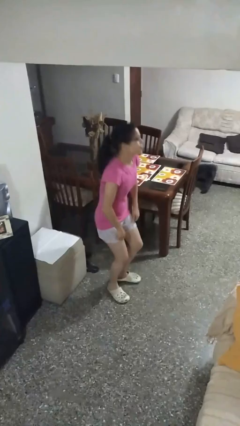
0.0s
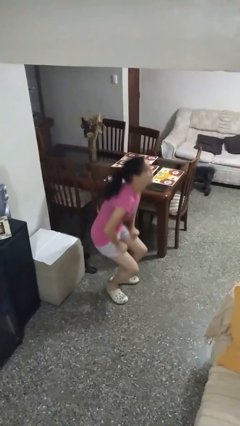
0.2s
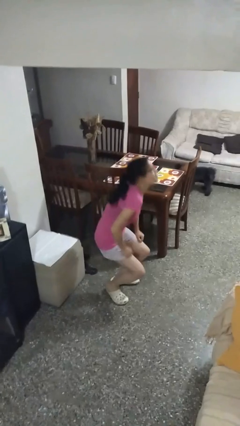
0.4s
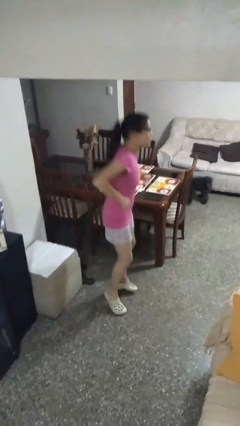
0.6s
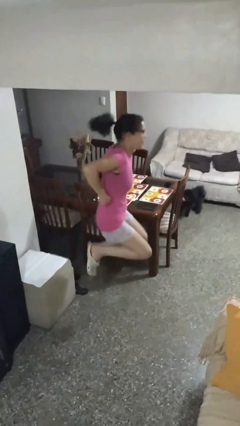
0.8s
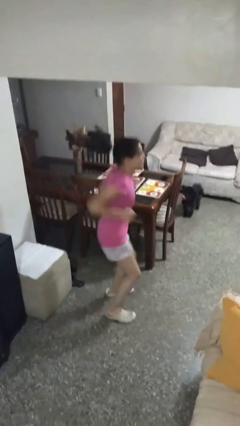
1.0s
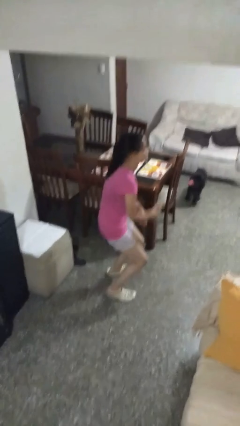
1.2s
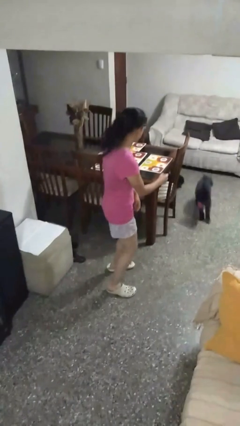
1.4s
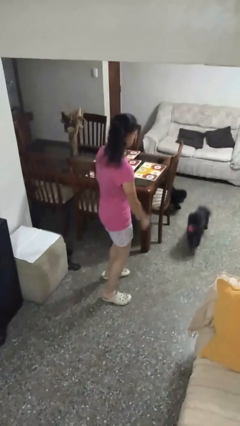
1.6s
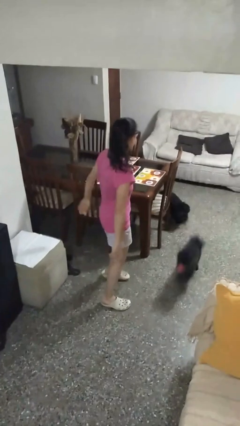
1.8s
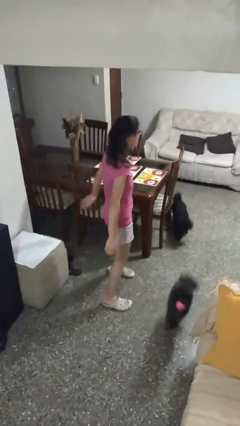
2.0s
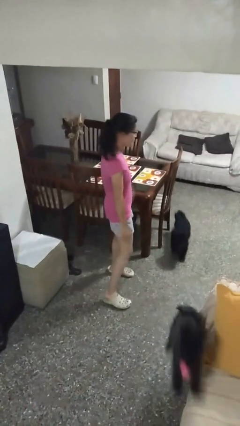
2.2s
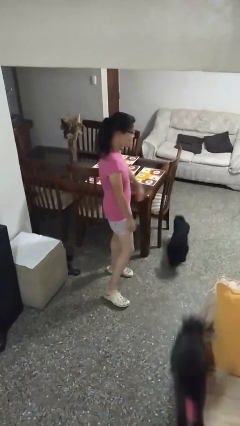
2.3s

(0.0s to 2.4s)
person jumps

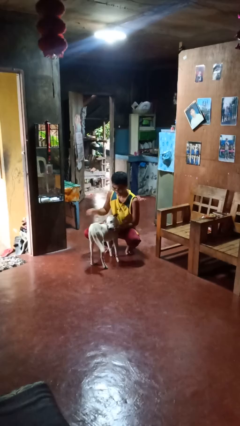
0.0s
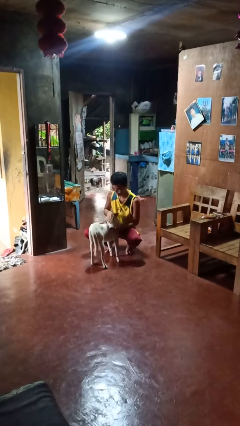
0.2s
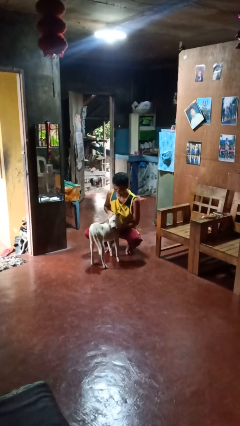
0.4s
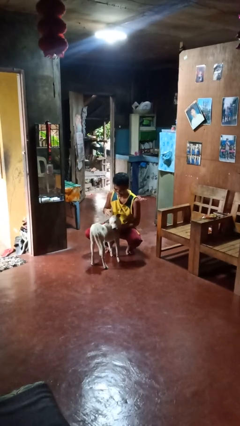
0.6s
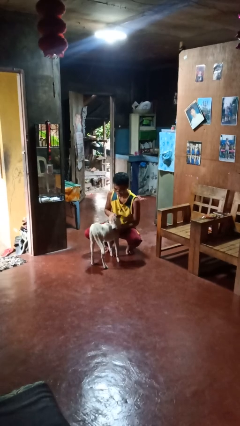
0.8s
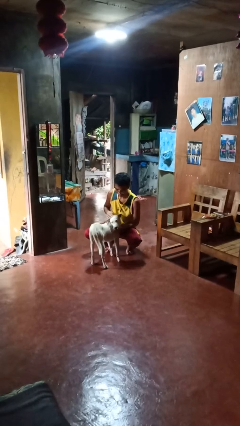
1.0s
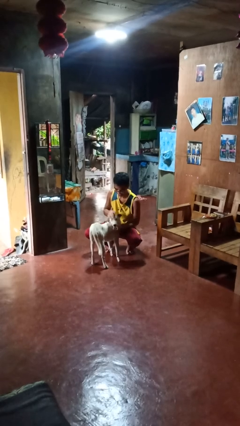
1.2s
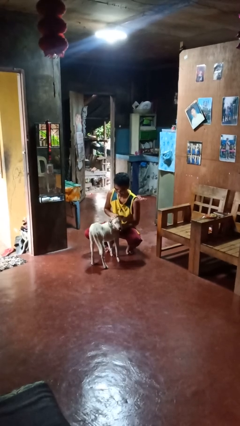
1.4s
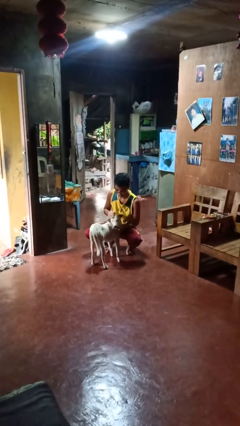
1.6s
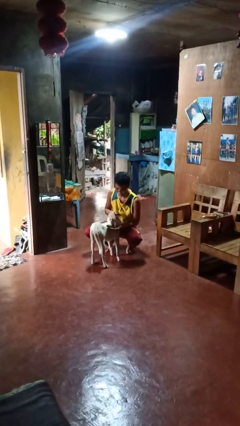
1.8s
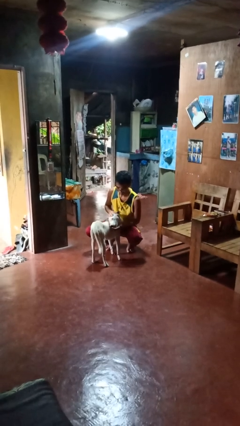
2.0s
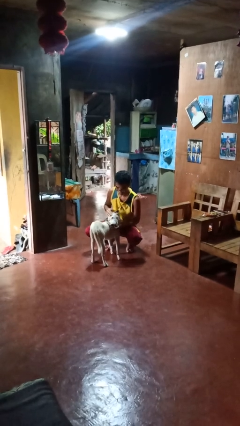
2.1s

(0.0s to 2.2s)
person pets dog

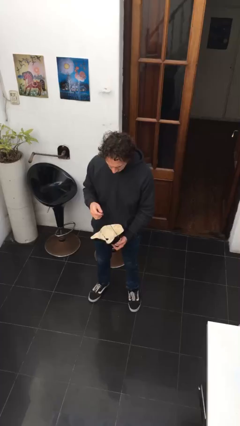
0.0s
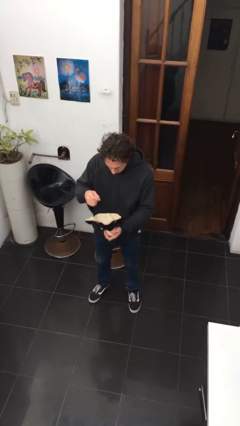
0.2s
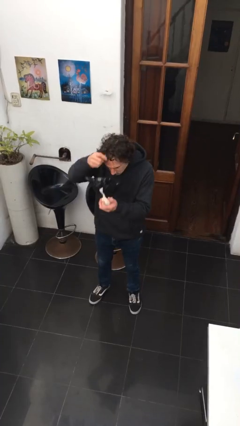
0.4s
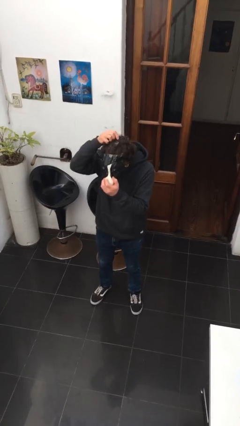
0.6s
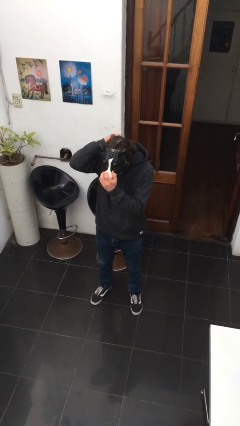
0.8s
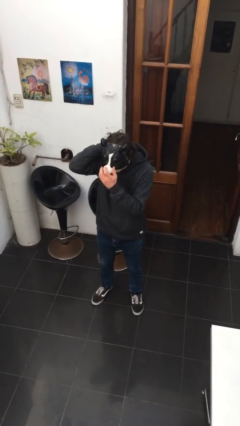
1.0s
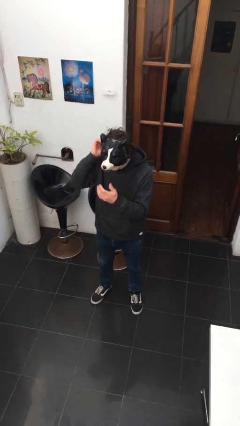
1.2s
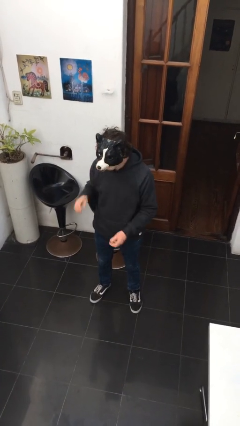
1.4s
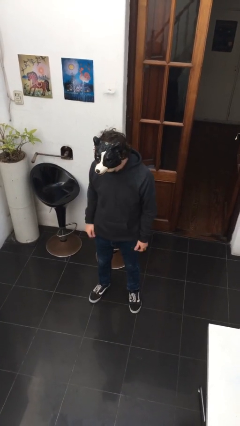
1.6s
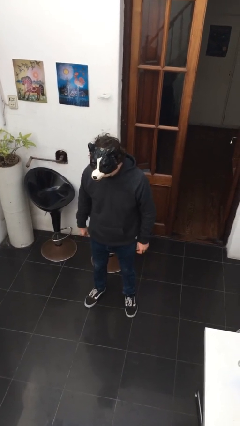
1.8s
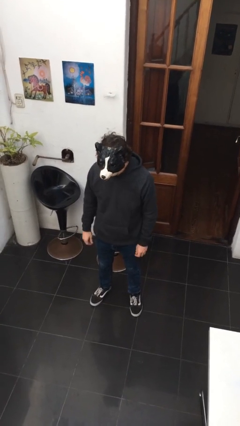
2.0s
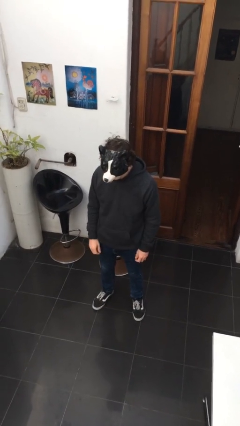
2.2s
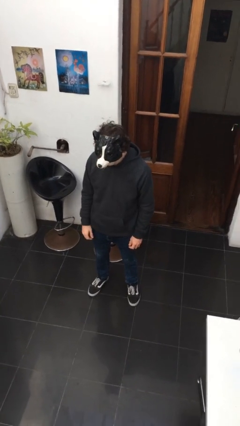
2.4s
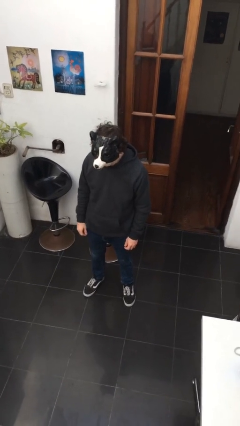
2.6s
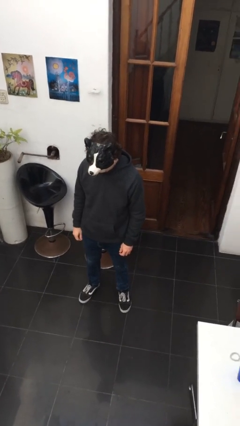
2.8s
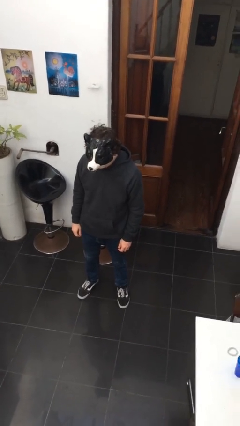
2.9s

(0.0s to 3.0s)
person puts on facemask

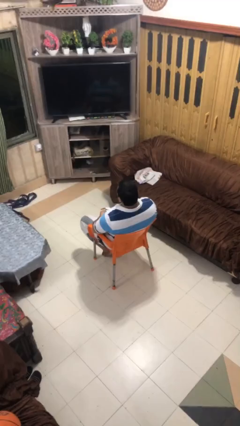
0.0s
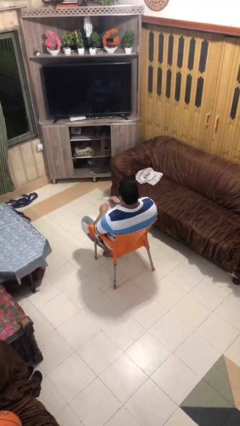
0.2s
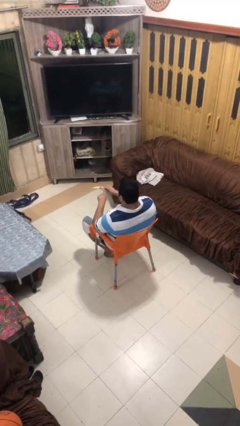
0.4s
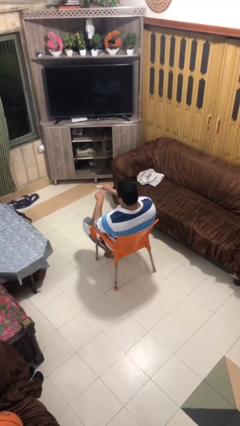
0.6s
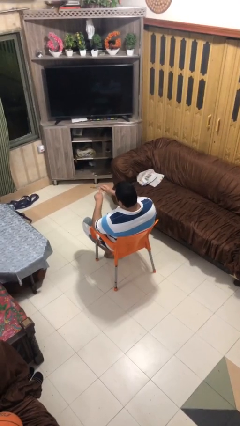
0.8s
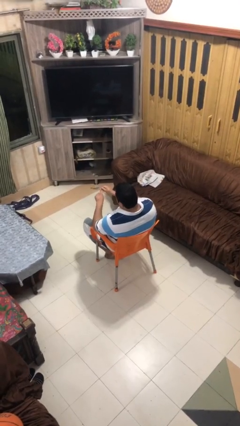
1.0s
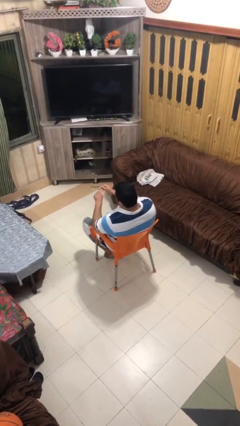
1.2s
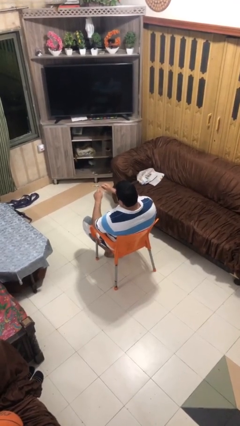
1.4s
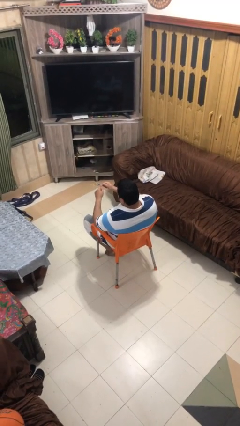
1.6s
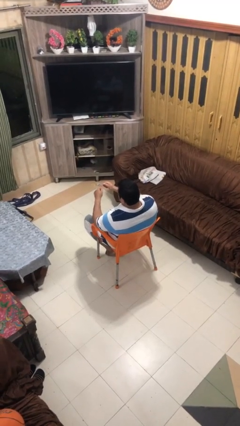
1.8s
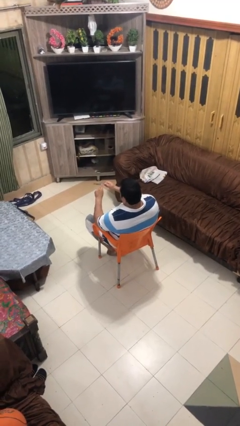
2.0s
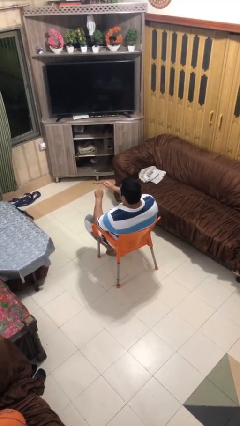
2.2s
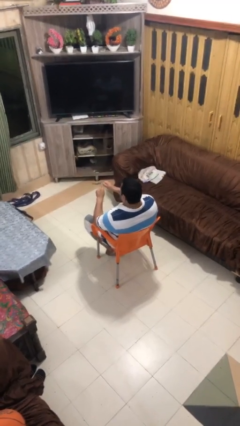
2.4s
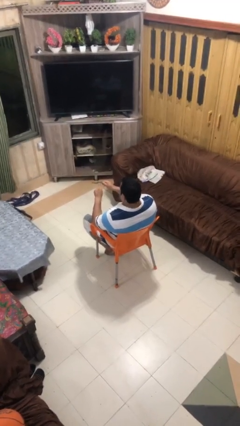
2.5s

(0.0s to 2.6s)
person files fingernails

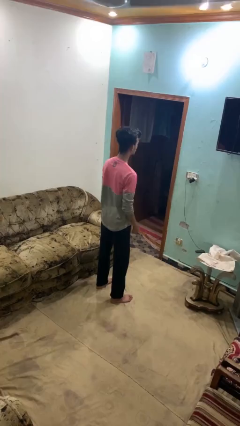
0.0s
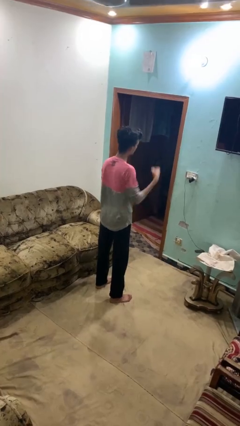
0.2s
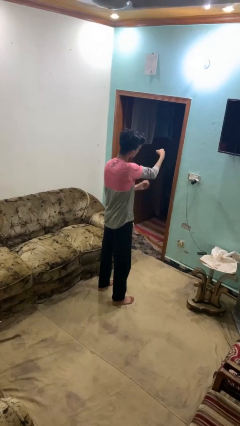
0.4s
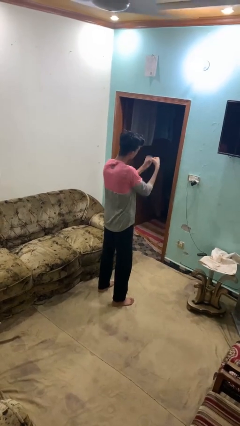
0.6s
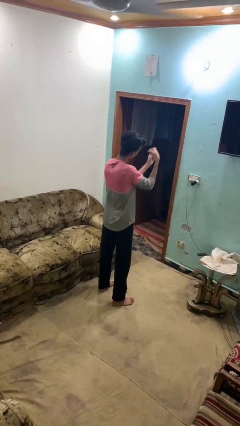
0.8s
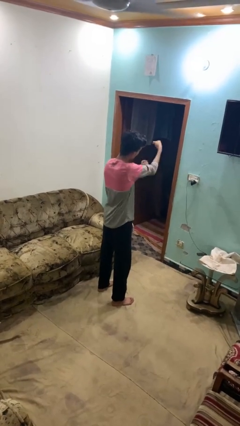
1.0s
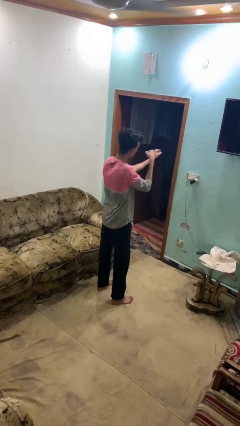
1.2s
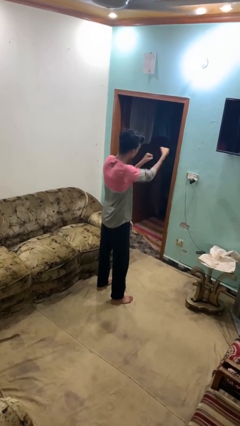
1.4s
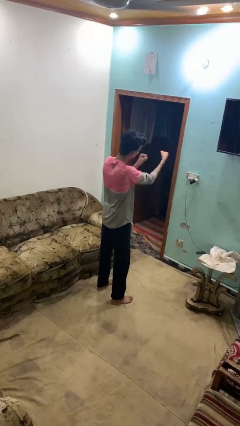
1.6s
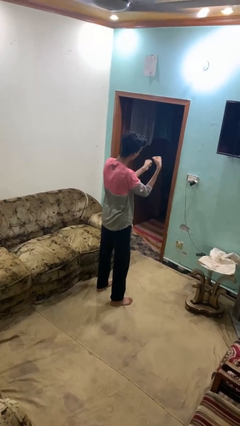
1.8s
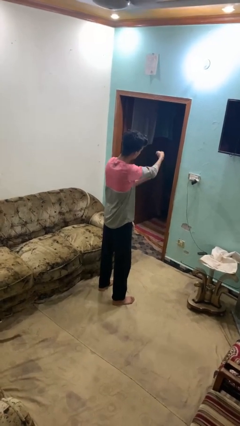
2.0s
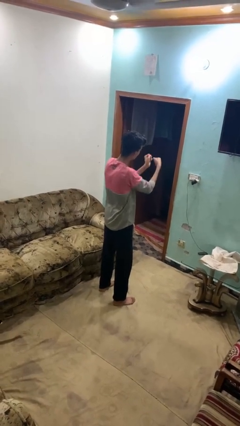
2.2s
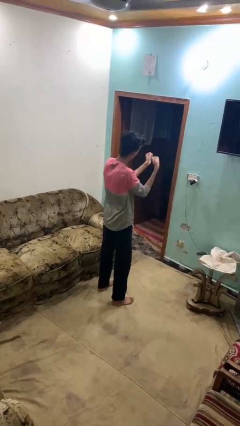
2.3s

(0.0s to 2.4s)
person punches

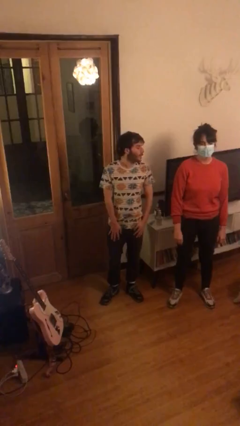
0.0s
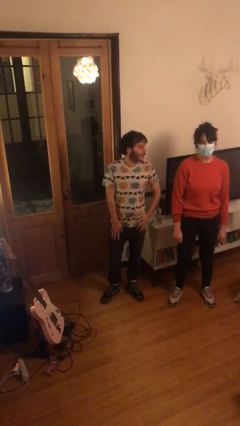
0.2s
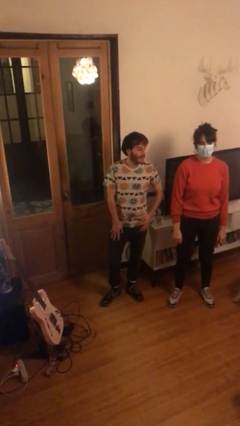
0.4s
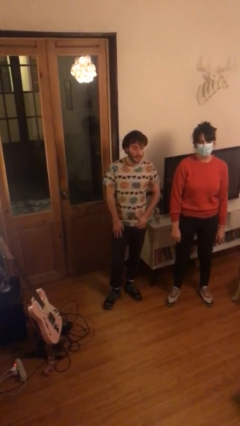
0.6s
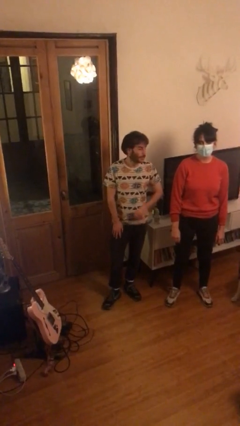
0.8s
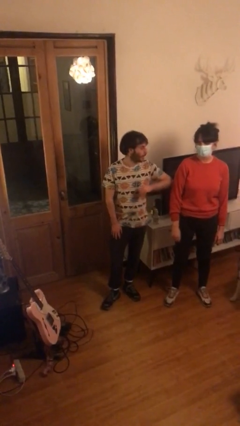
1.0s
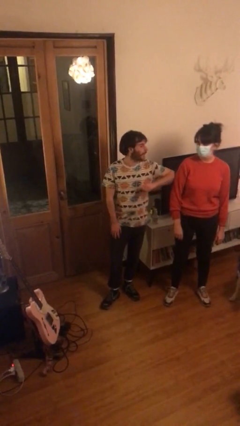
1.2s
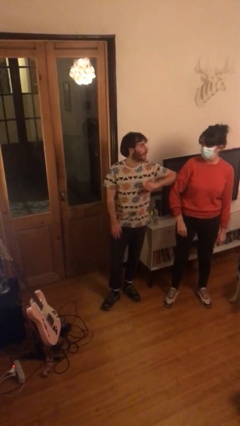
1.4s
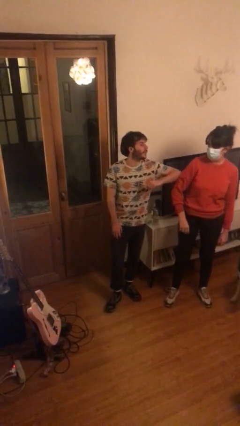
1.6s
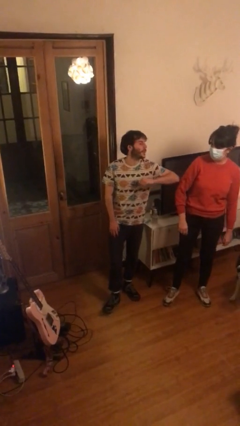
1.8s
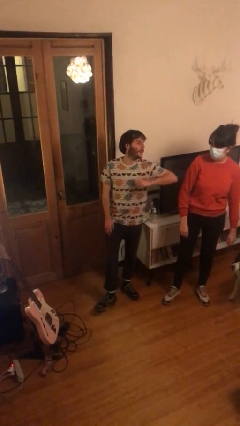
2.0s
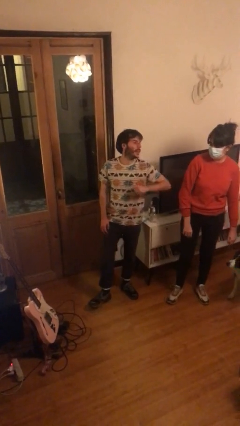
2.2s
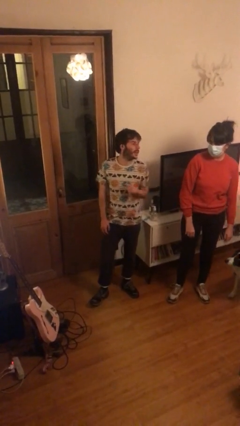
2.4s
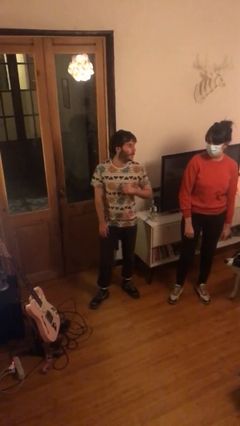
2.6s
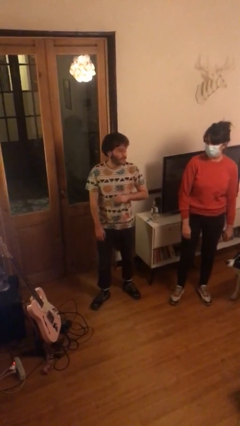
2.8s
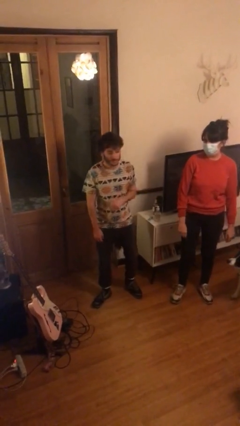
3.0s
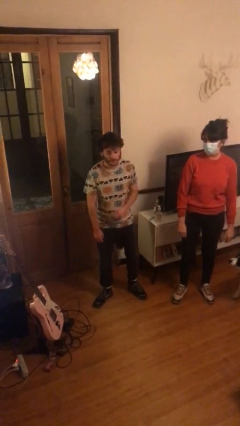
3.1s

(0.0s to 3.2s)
person nudges person with elbow

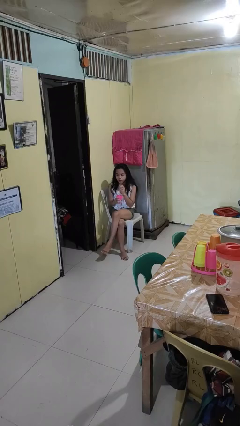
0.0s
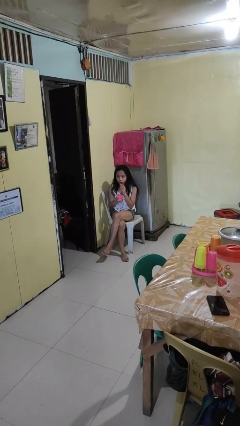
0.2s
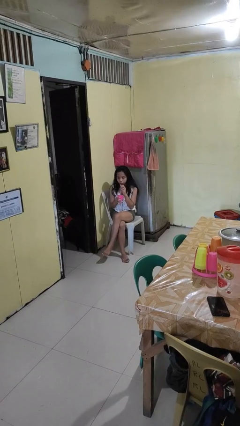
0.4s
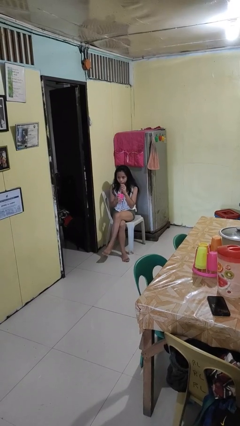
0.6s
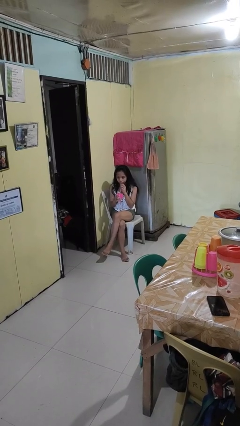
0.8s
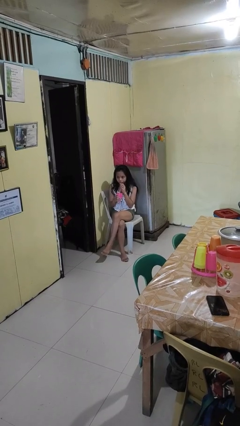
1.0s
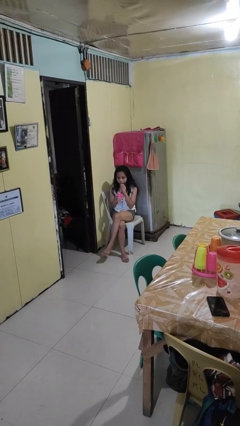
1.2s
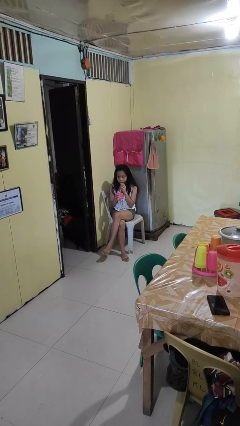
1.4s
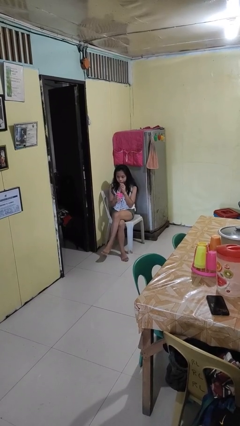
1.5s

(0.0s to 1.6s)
person drinks from straw
